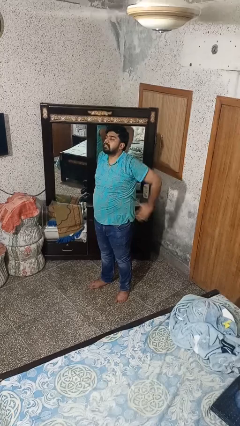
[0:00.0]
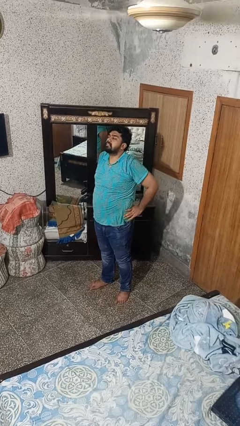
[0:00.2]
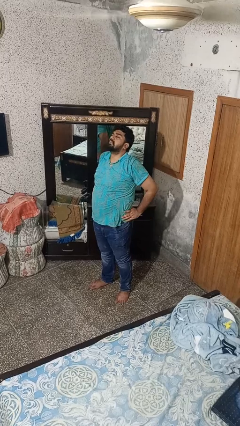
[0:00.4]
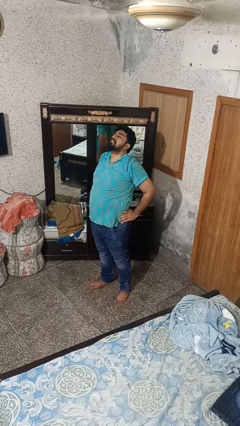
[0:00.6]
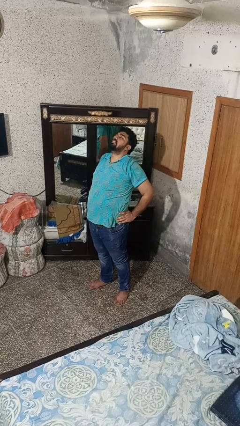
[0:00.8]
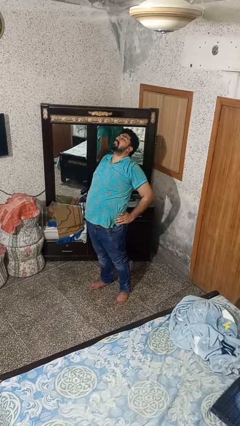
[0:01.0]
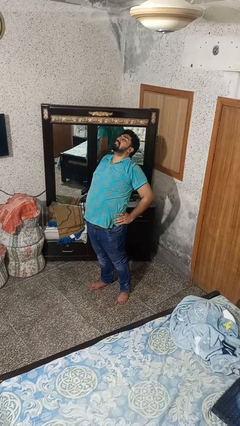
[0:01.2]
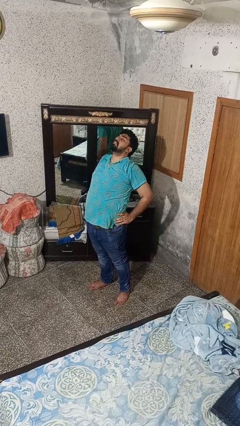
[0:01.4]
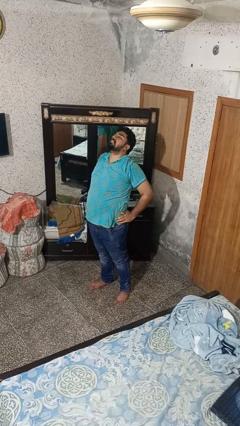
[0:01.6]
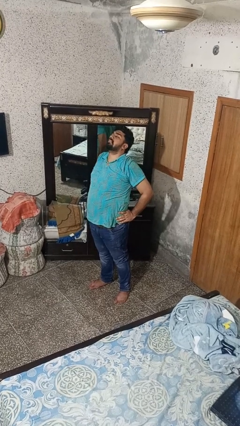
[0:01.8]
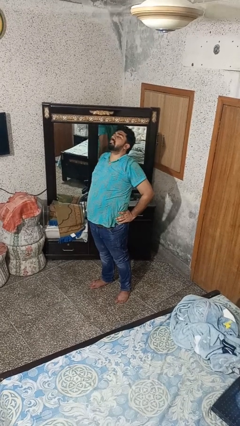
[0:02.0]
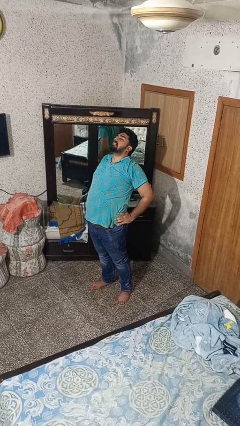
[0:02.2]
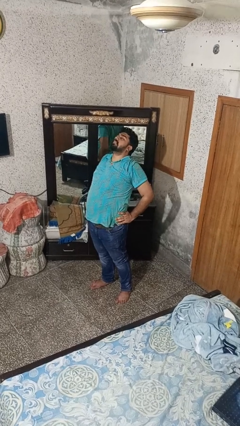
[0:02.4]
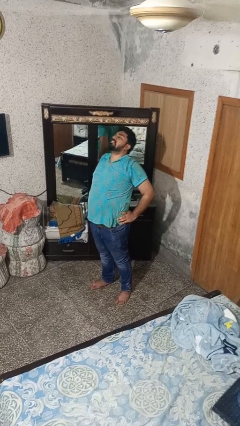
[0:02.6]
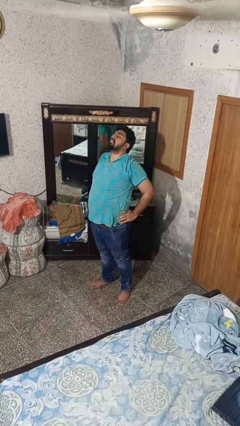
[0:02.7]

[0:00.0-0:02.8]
person stretches back

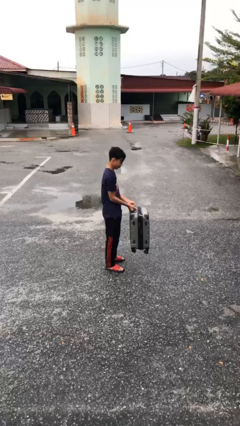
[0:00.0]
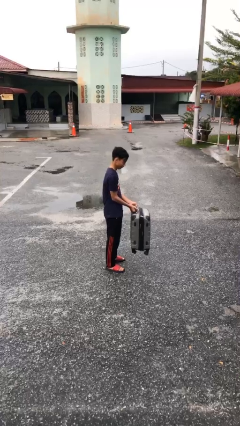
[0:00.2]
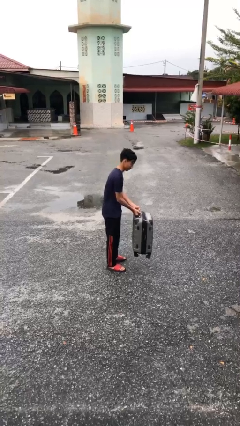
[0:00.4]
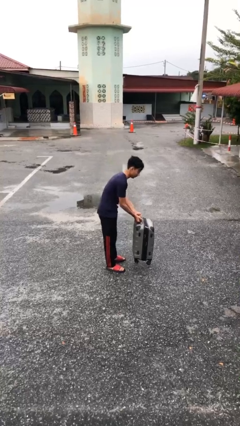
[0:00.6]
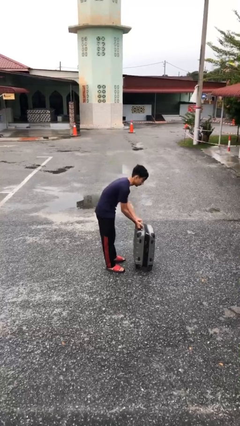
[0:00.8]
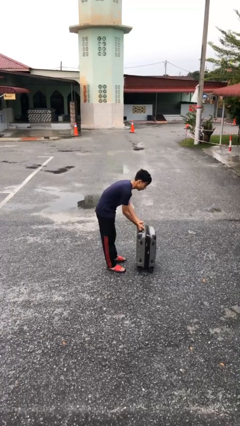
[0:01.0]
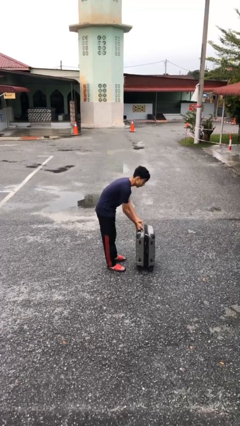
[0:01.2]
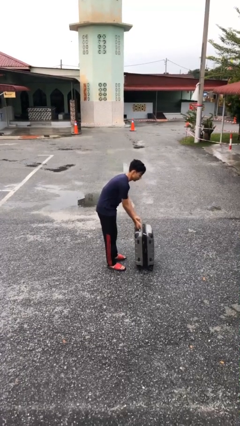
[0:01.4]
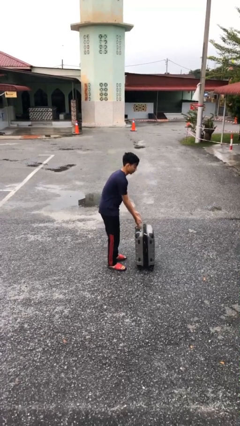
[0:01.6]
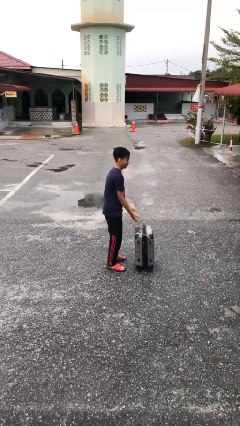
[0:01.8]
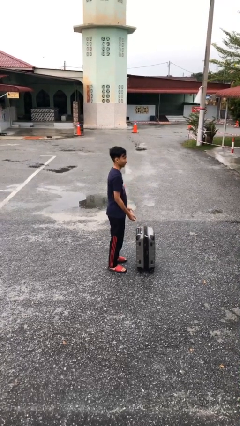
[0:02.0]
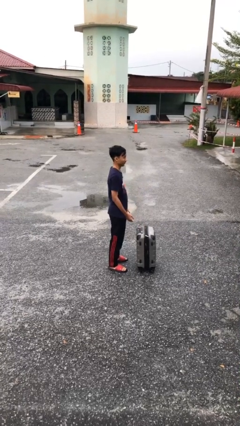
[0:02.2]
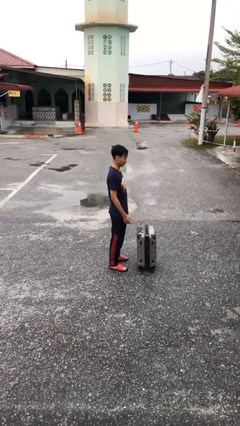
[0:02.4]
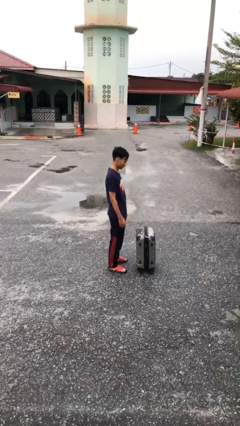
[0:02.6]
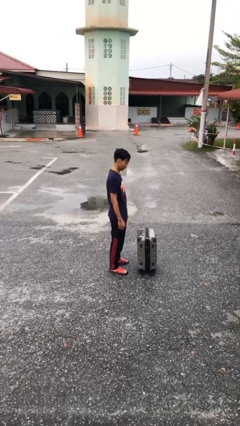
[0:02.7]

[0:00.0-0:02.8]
person puts down object on floor

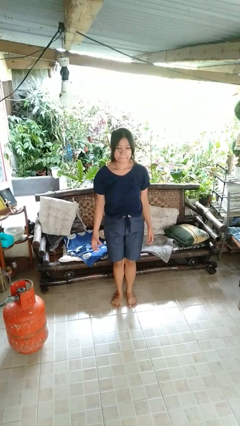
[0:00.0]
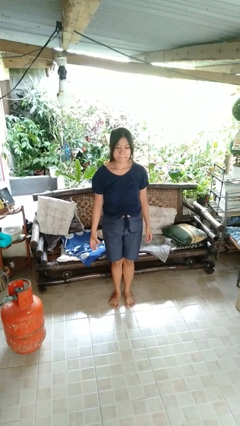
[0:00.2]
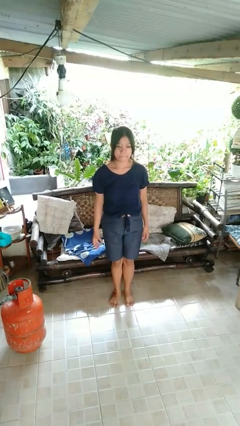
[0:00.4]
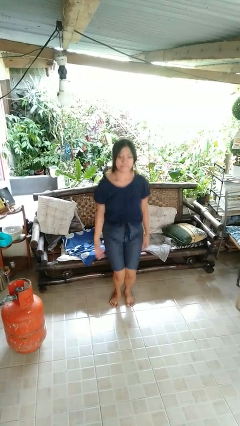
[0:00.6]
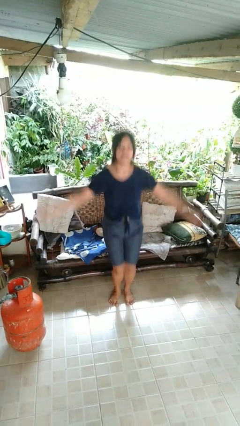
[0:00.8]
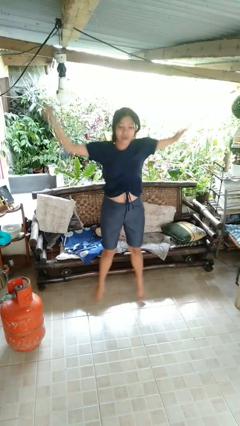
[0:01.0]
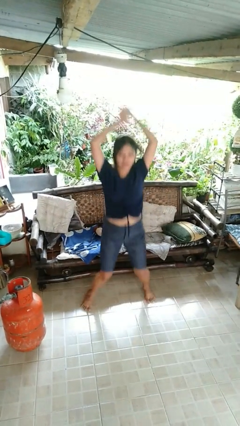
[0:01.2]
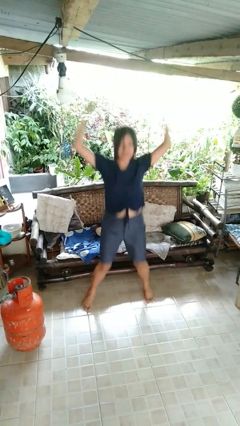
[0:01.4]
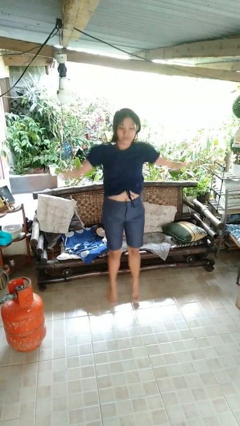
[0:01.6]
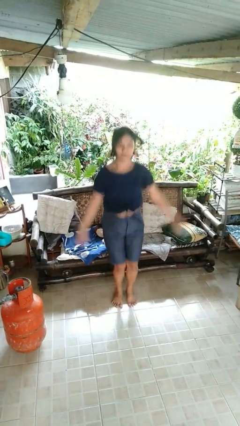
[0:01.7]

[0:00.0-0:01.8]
person exercises with jumping jacks

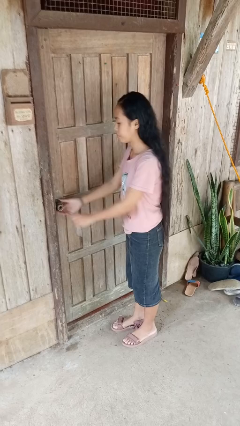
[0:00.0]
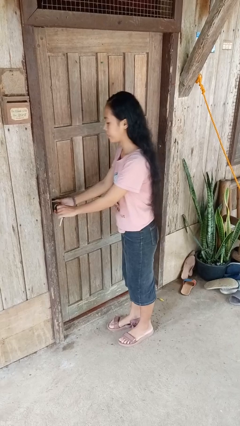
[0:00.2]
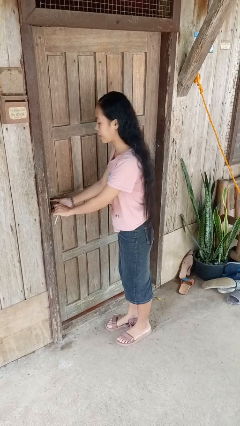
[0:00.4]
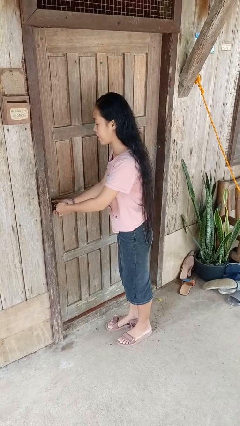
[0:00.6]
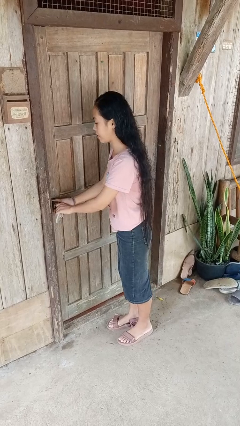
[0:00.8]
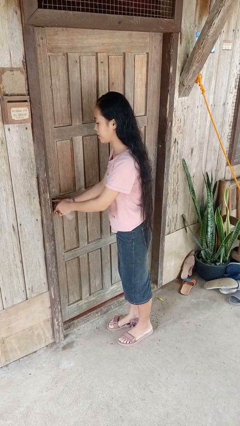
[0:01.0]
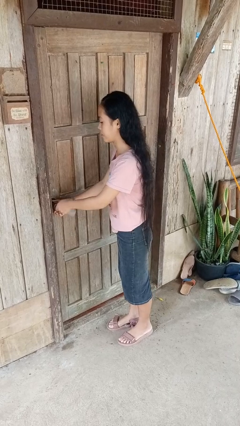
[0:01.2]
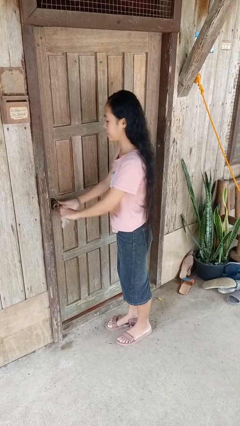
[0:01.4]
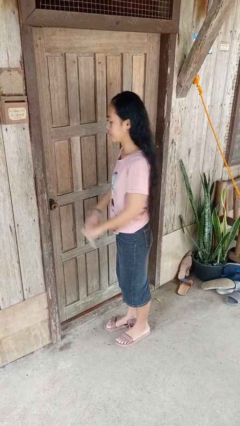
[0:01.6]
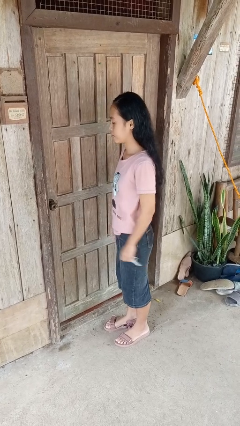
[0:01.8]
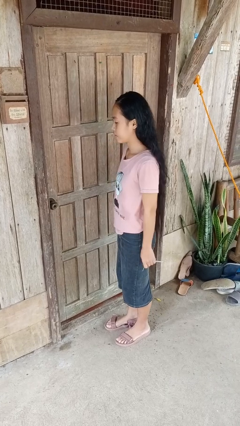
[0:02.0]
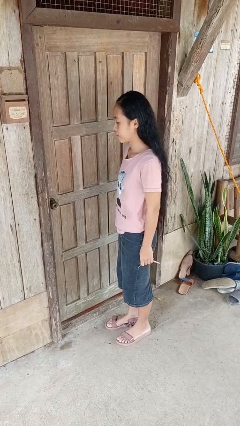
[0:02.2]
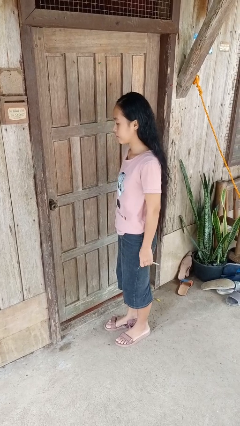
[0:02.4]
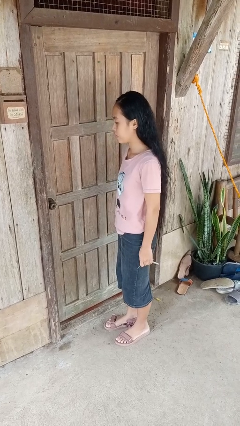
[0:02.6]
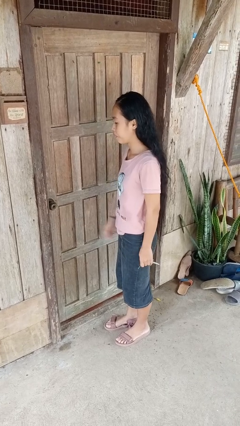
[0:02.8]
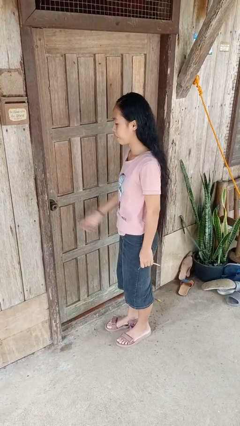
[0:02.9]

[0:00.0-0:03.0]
person unlocks door with keys

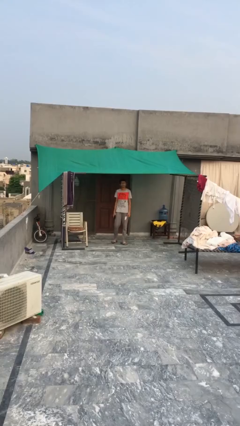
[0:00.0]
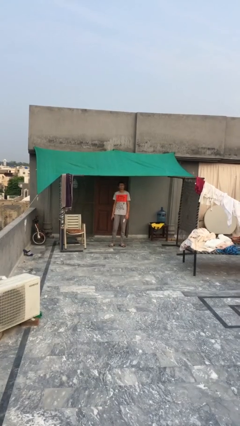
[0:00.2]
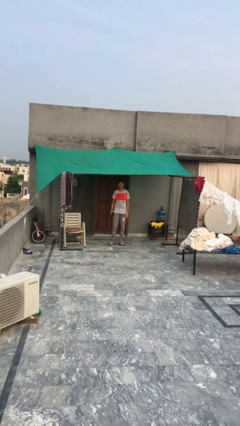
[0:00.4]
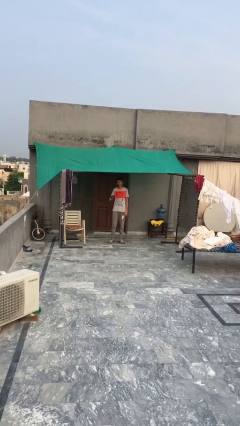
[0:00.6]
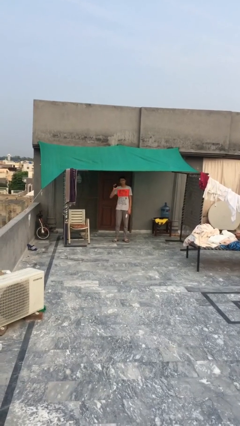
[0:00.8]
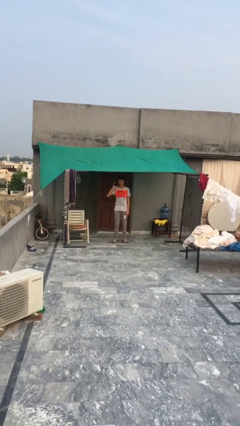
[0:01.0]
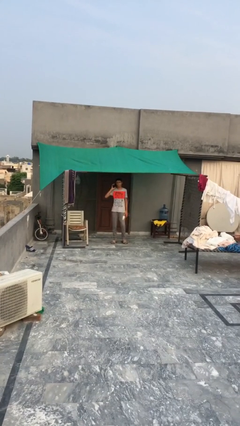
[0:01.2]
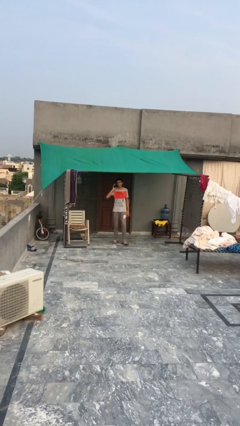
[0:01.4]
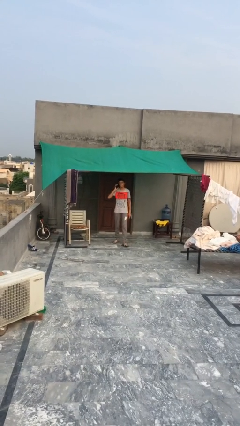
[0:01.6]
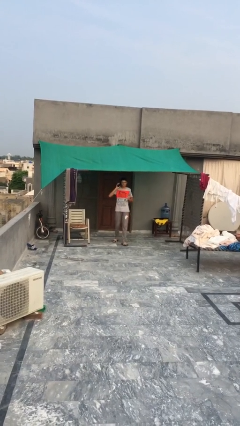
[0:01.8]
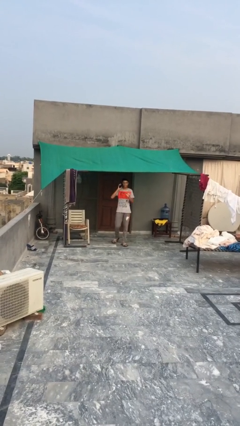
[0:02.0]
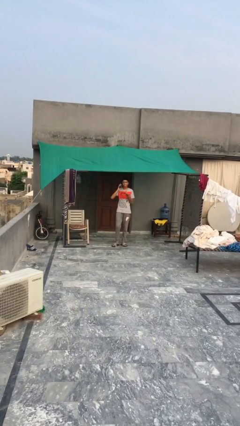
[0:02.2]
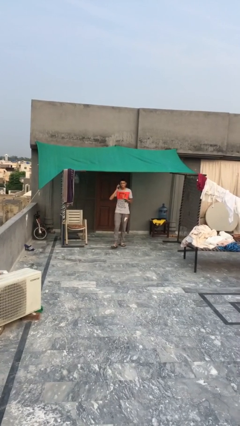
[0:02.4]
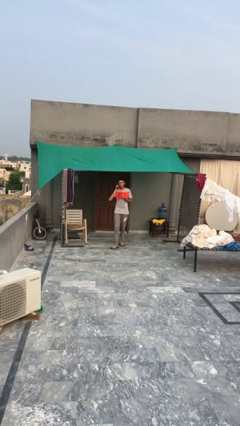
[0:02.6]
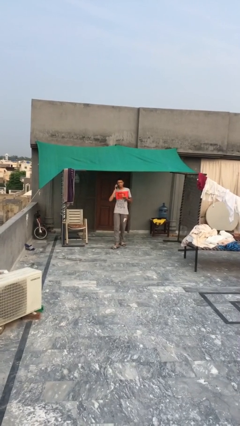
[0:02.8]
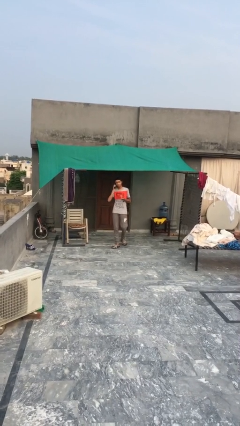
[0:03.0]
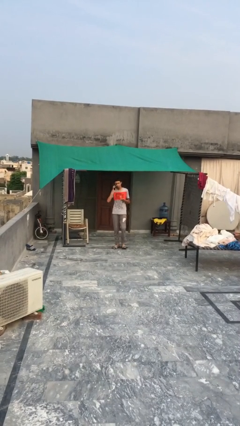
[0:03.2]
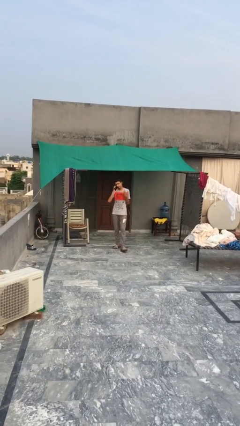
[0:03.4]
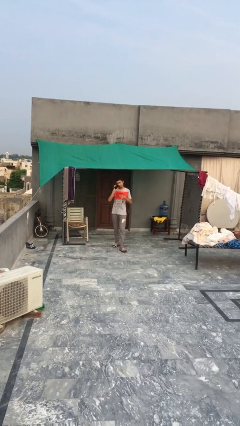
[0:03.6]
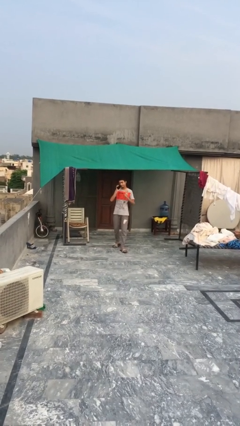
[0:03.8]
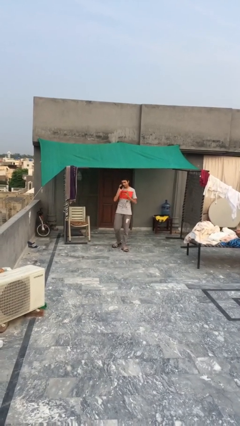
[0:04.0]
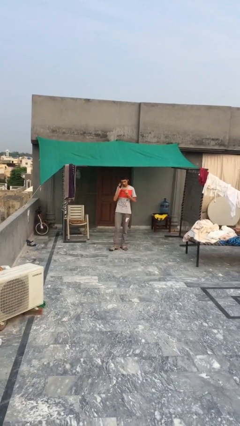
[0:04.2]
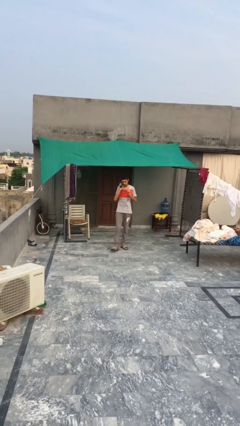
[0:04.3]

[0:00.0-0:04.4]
person talks on phone

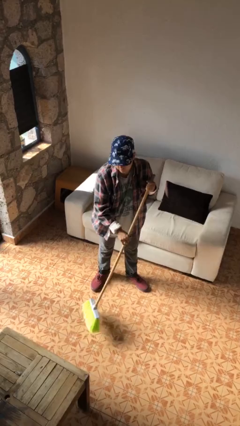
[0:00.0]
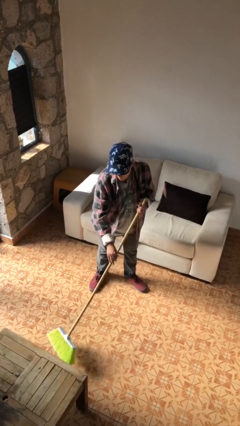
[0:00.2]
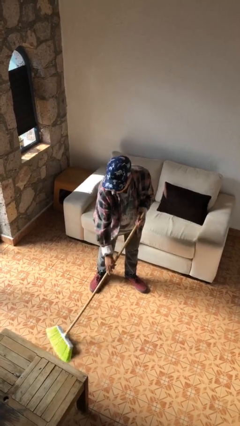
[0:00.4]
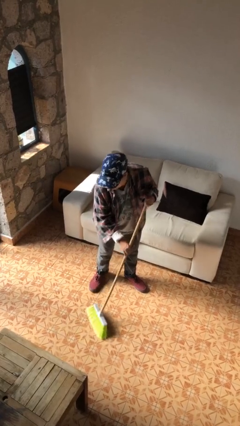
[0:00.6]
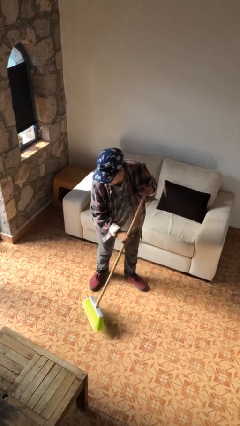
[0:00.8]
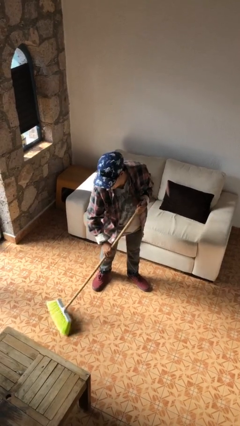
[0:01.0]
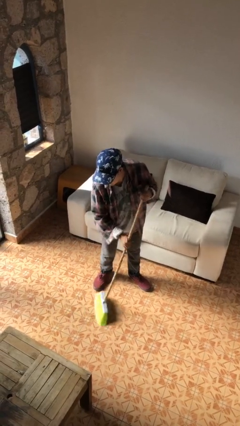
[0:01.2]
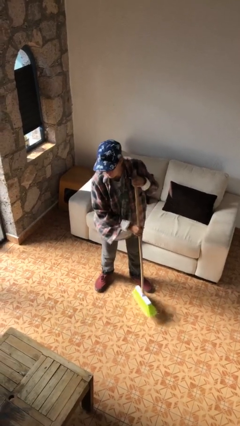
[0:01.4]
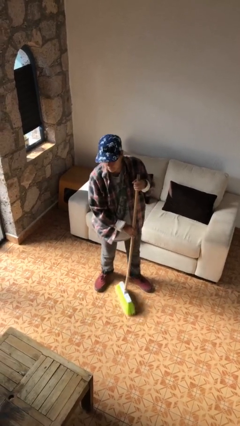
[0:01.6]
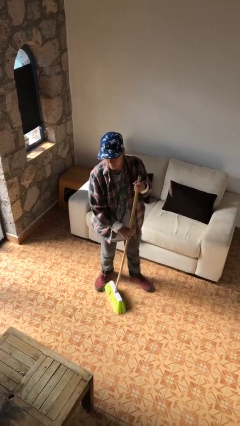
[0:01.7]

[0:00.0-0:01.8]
person sweeps floor

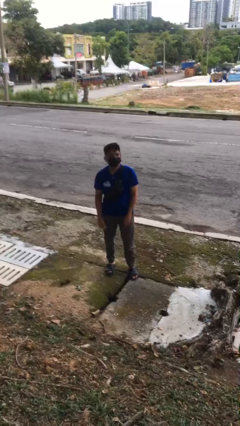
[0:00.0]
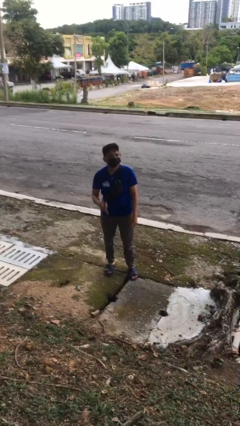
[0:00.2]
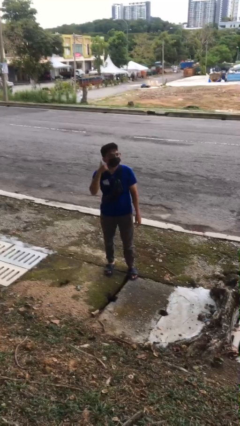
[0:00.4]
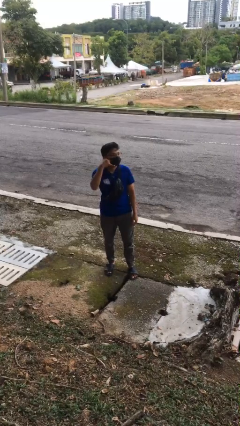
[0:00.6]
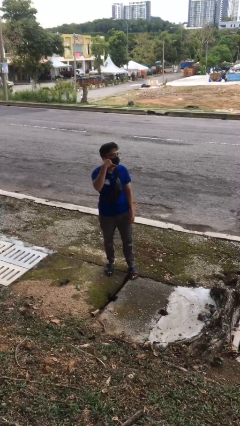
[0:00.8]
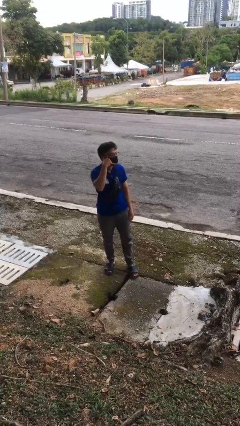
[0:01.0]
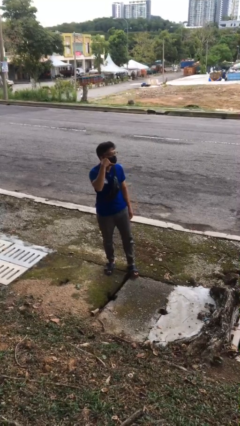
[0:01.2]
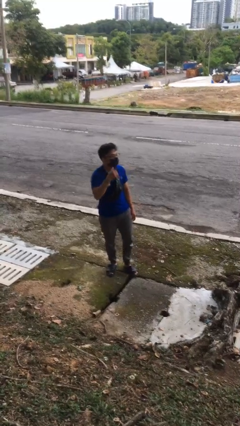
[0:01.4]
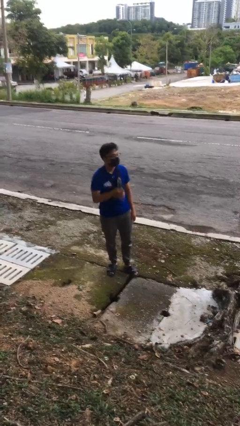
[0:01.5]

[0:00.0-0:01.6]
person gestures call me
